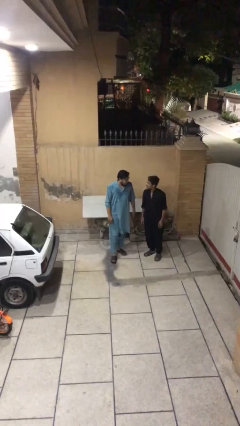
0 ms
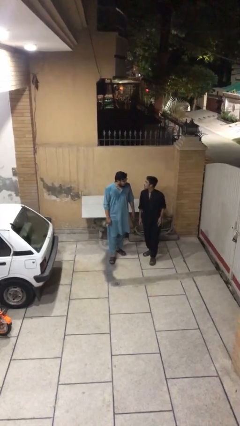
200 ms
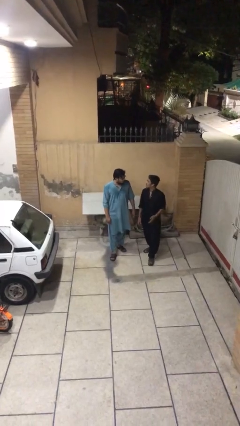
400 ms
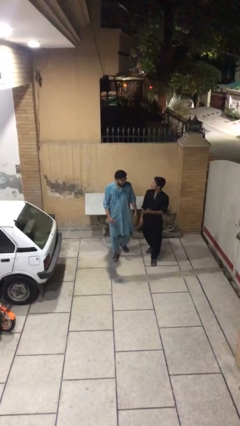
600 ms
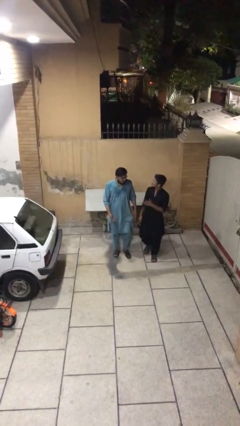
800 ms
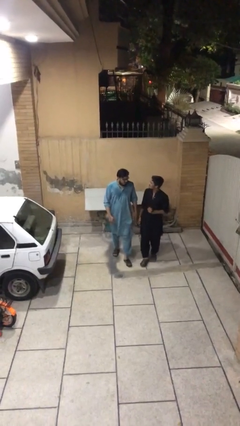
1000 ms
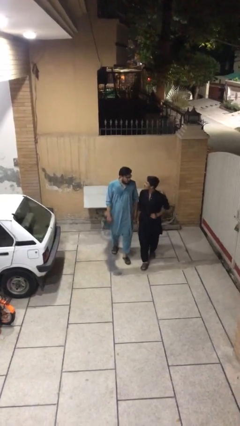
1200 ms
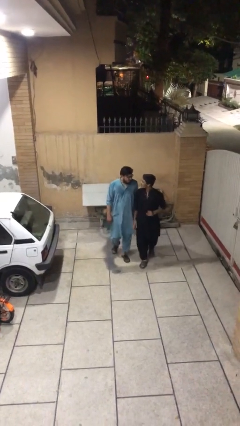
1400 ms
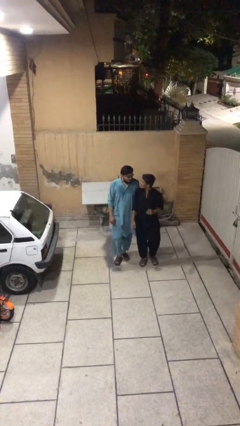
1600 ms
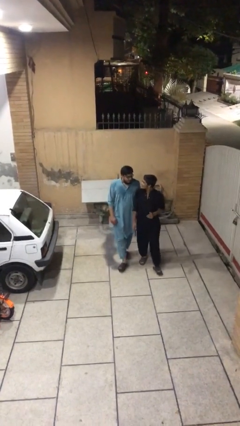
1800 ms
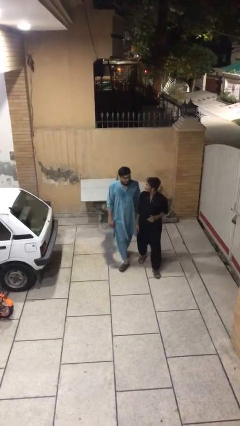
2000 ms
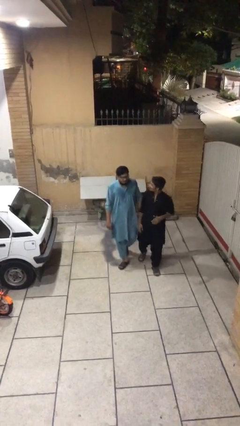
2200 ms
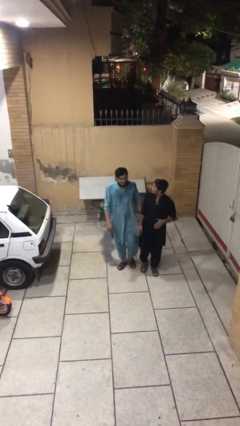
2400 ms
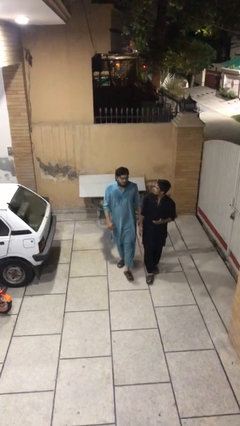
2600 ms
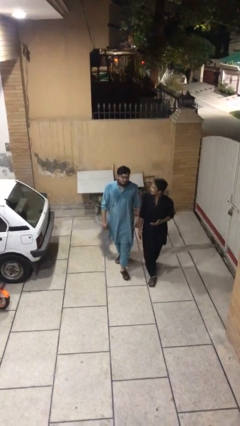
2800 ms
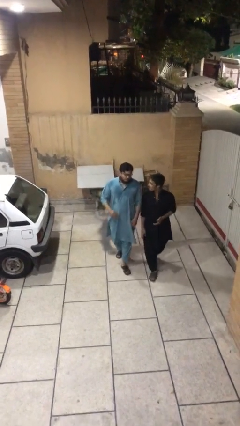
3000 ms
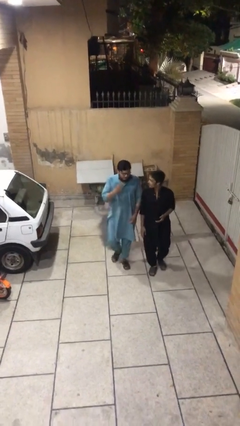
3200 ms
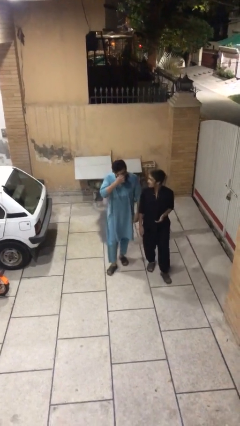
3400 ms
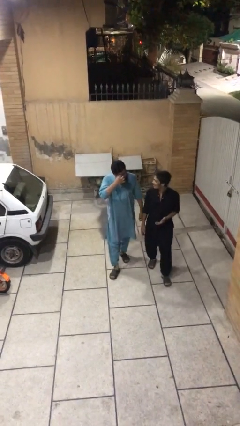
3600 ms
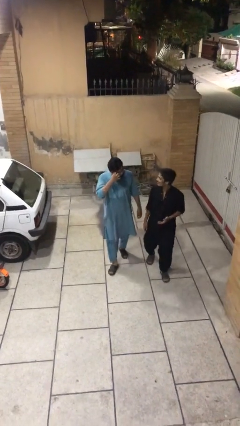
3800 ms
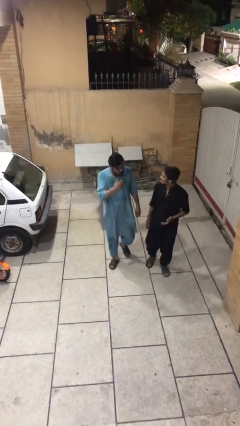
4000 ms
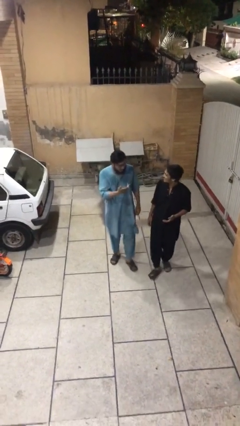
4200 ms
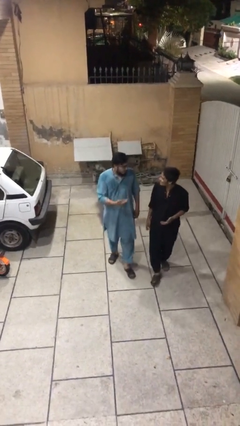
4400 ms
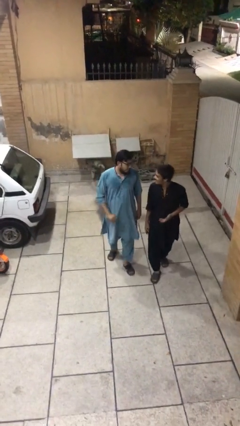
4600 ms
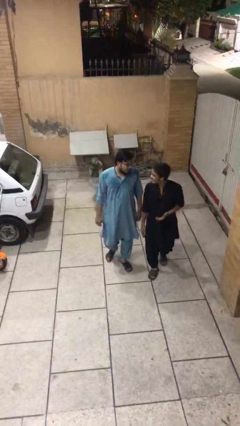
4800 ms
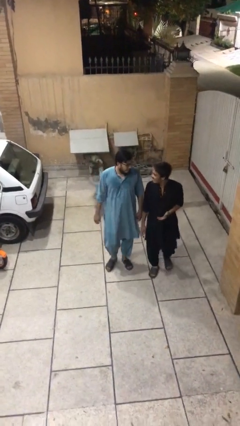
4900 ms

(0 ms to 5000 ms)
person talks to person

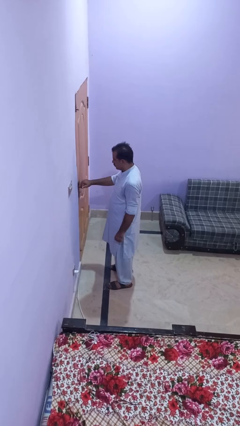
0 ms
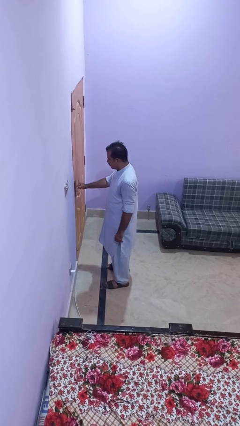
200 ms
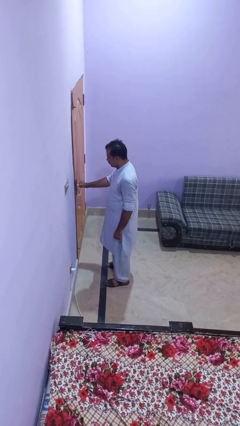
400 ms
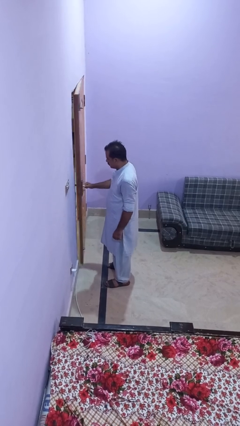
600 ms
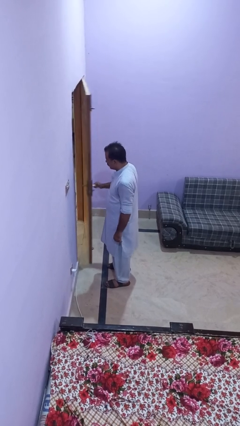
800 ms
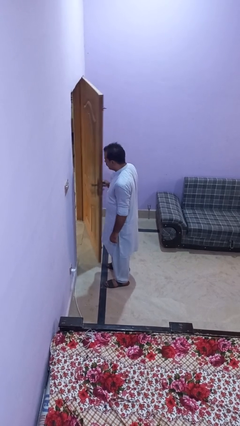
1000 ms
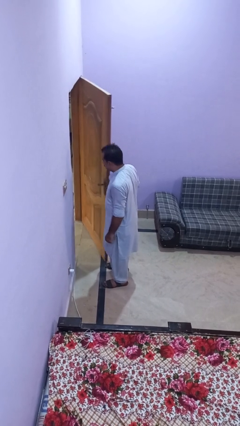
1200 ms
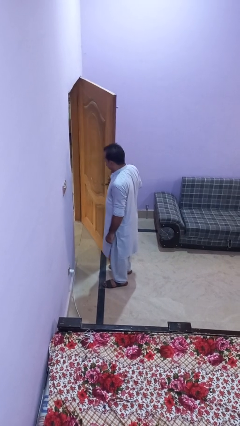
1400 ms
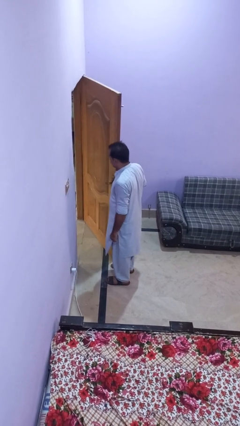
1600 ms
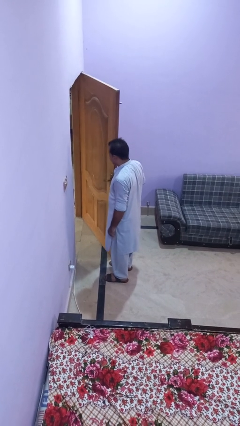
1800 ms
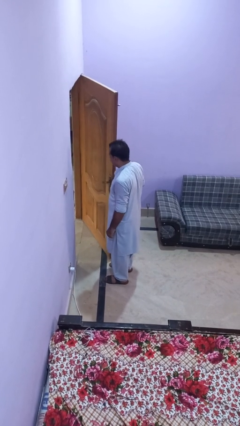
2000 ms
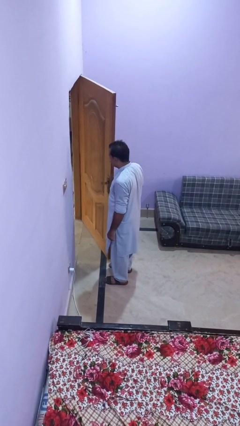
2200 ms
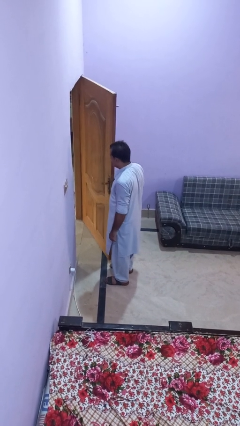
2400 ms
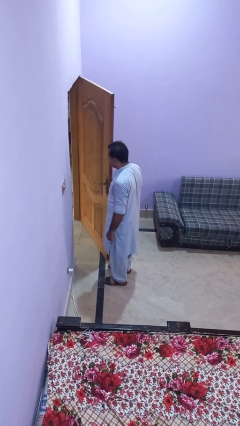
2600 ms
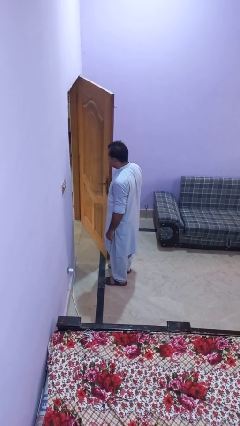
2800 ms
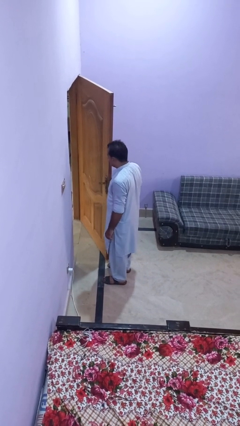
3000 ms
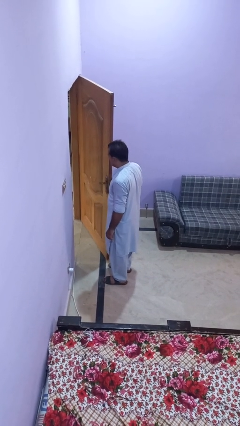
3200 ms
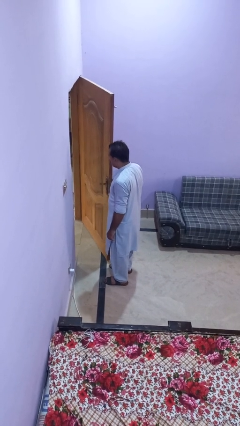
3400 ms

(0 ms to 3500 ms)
person opens facility door

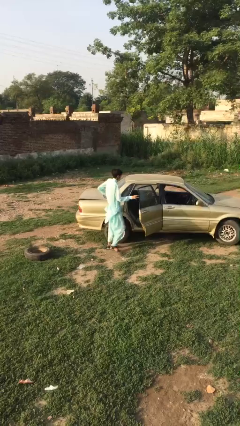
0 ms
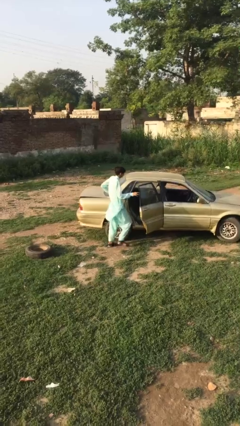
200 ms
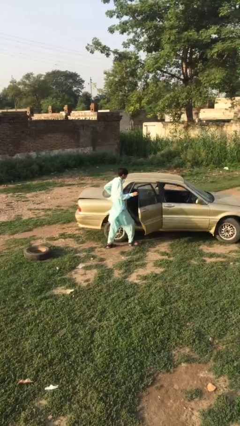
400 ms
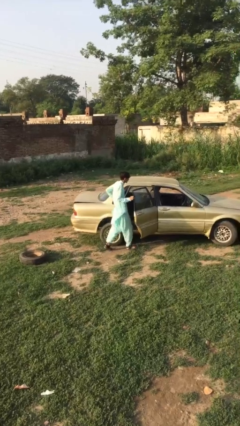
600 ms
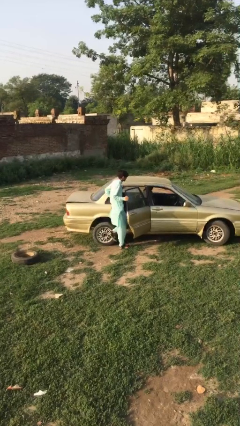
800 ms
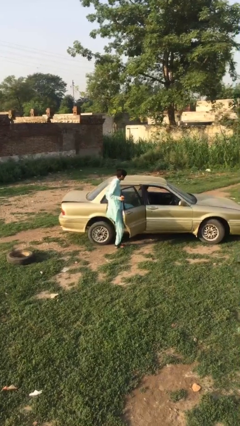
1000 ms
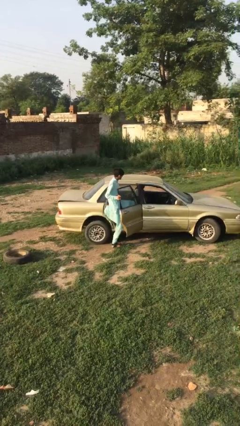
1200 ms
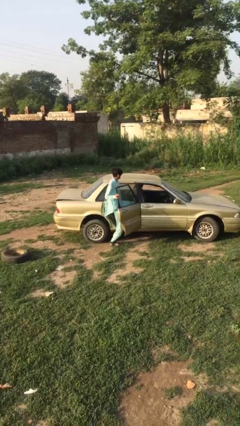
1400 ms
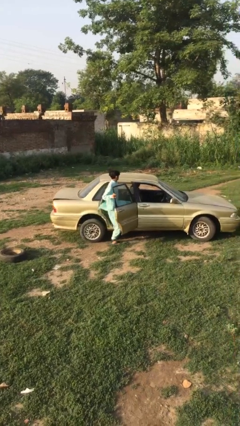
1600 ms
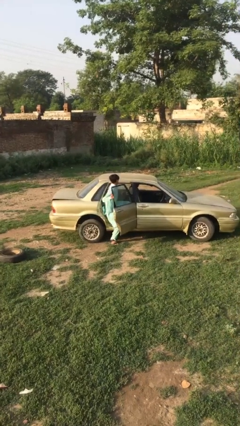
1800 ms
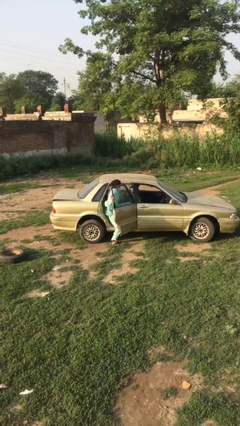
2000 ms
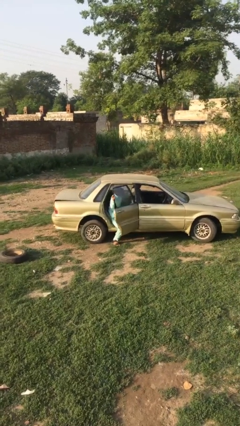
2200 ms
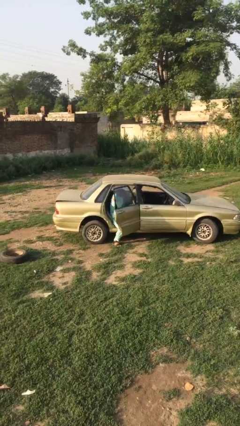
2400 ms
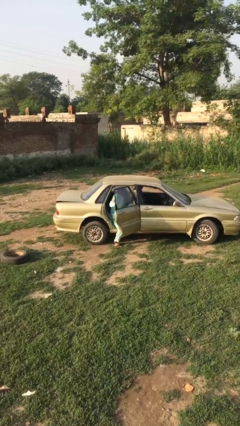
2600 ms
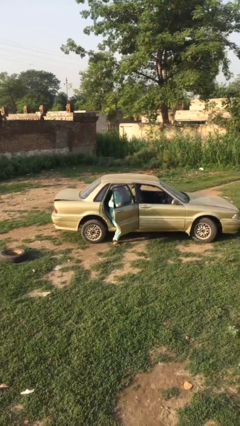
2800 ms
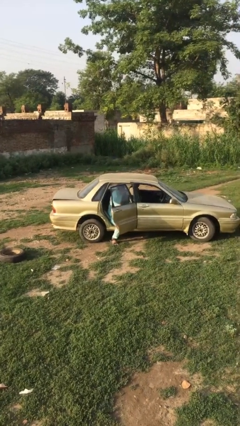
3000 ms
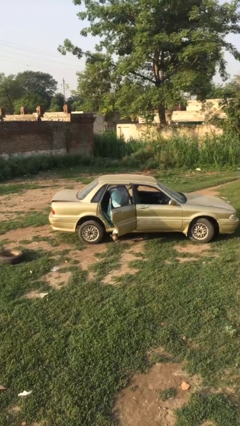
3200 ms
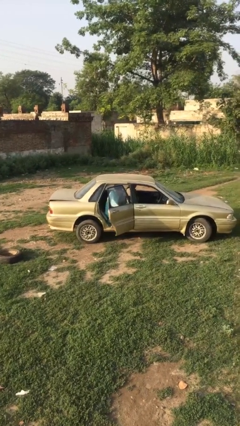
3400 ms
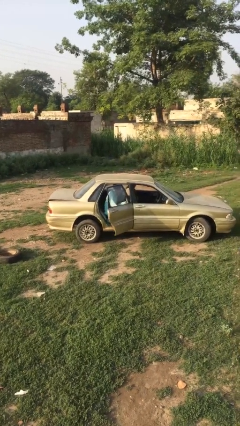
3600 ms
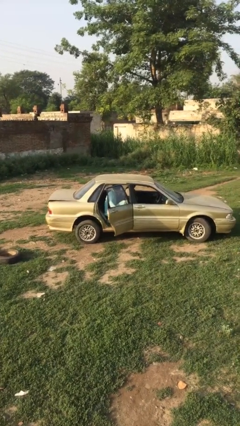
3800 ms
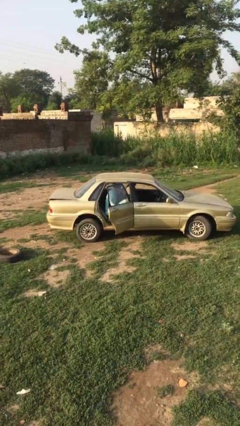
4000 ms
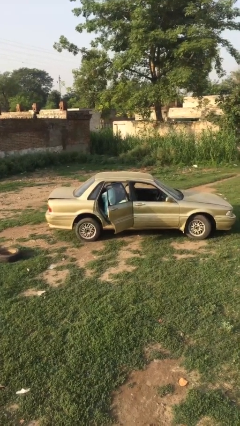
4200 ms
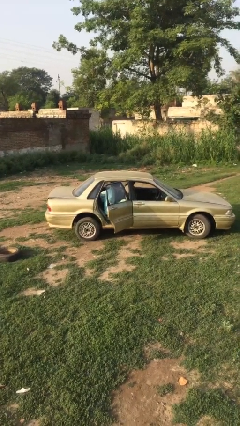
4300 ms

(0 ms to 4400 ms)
person enters car

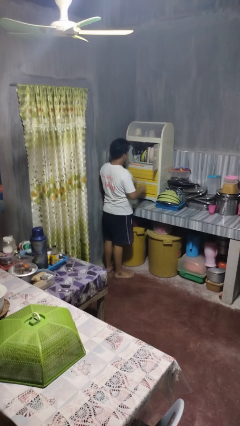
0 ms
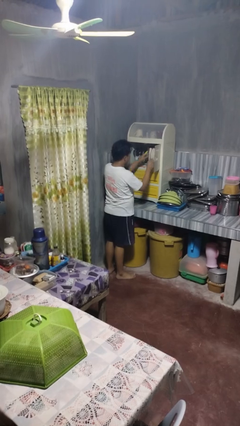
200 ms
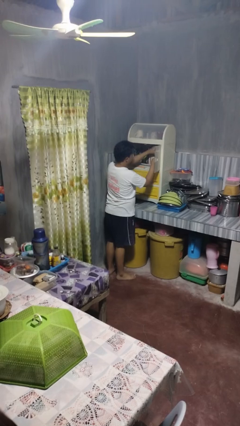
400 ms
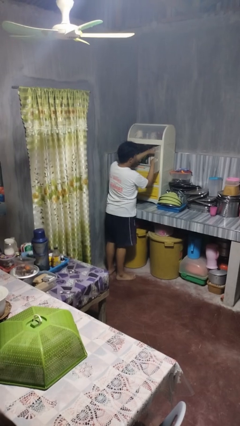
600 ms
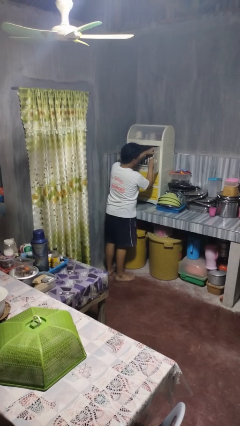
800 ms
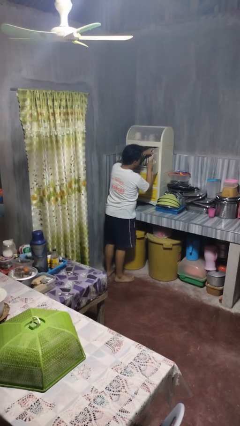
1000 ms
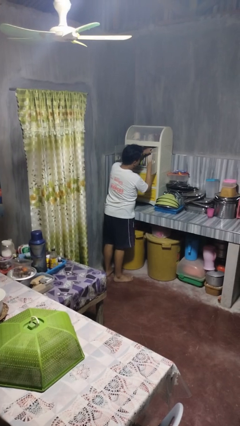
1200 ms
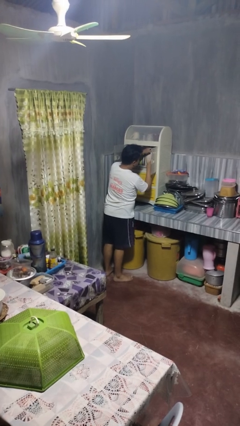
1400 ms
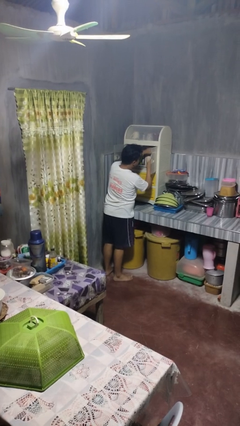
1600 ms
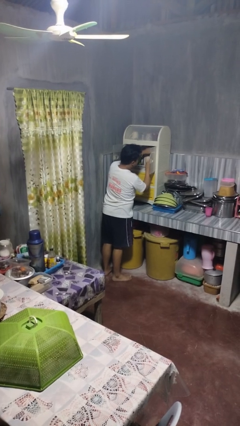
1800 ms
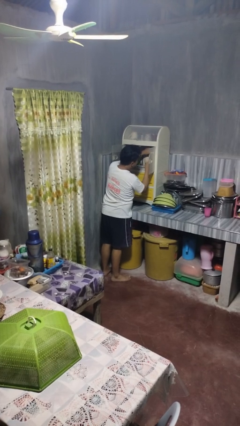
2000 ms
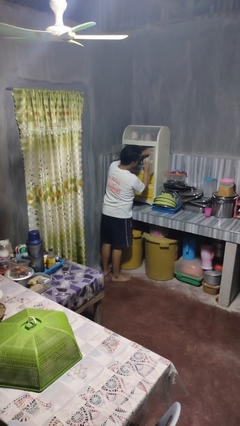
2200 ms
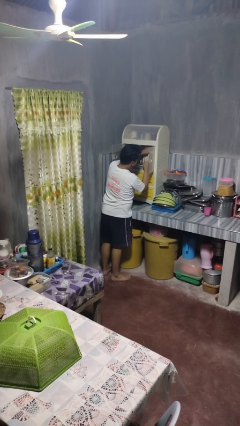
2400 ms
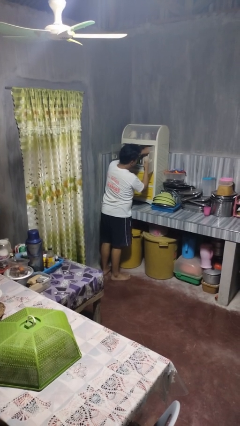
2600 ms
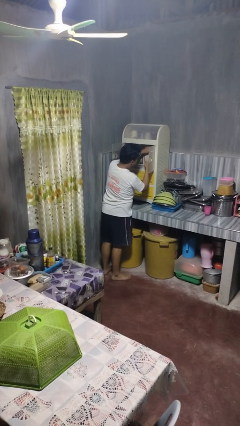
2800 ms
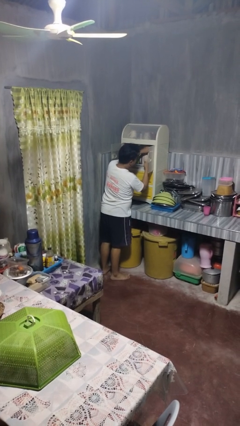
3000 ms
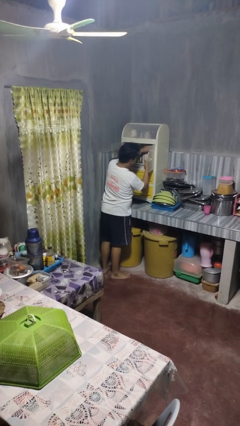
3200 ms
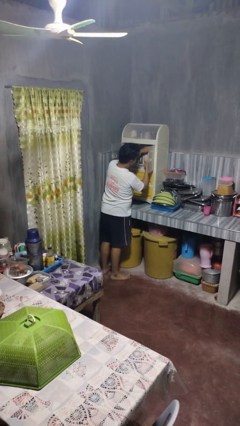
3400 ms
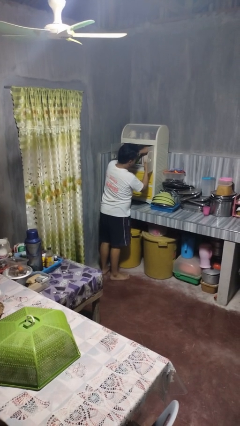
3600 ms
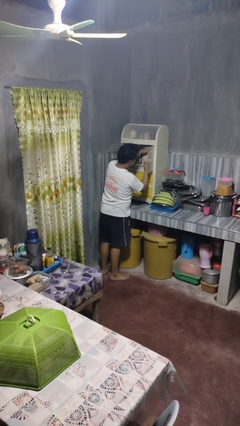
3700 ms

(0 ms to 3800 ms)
person searches in cabinet

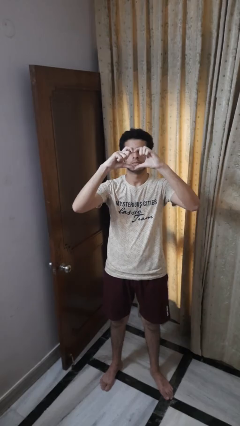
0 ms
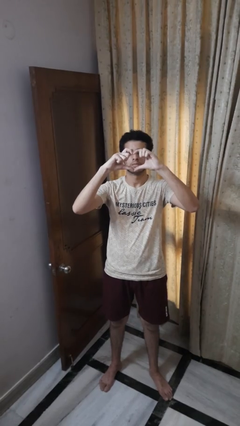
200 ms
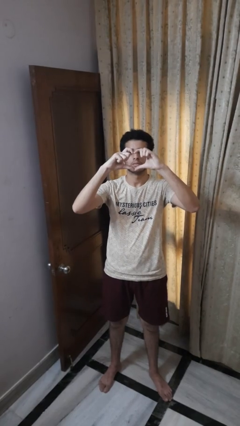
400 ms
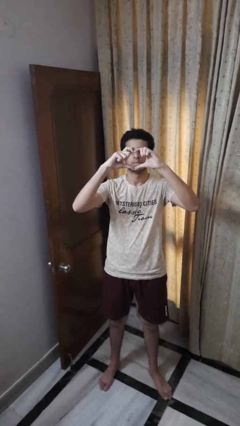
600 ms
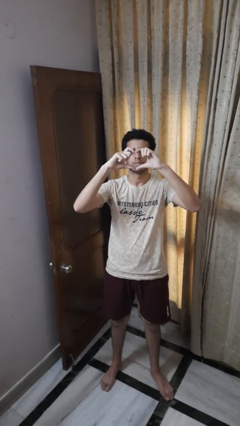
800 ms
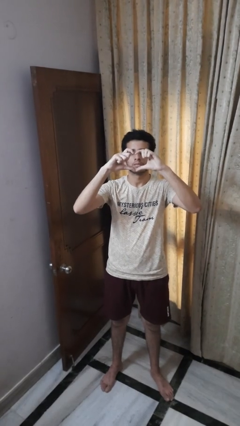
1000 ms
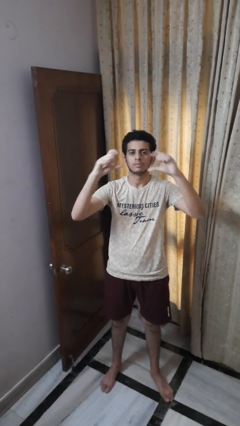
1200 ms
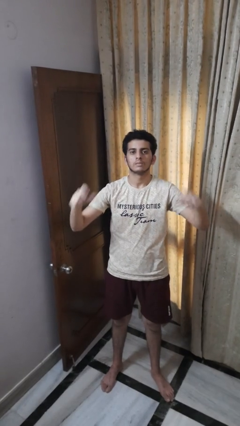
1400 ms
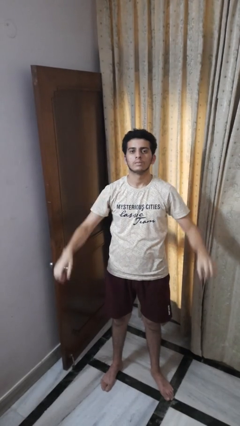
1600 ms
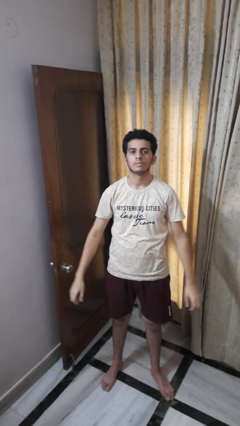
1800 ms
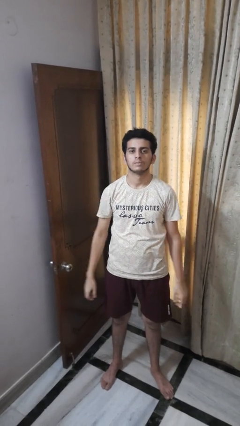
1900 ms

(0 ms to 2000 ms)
person gestures heart
